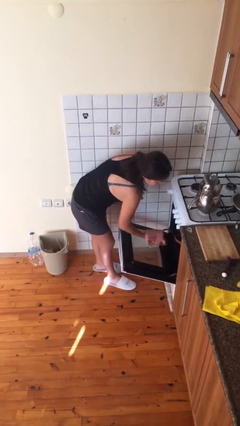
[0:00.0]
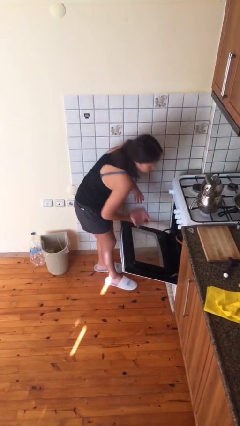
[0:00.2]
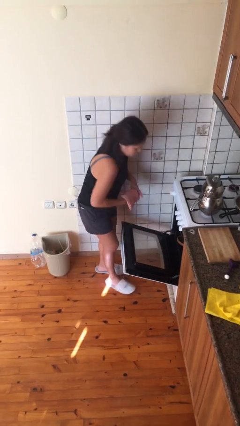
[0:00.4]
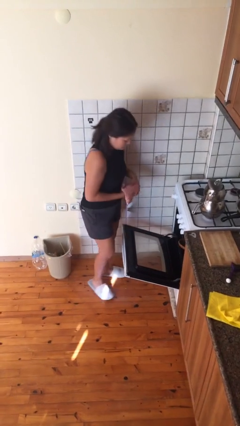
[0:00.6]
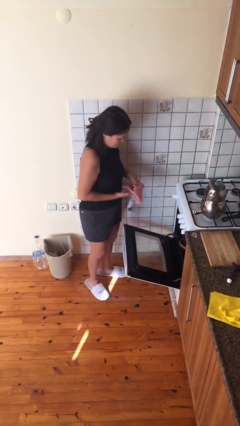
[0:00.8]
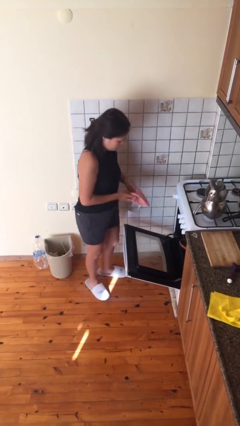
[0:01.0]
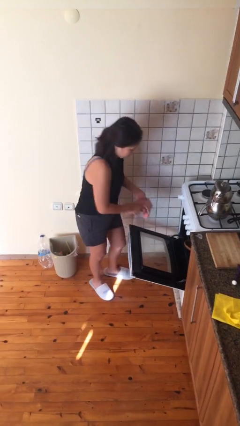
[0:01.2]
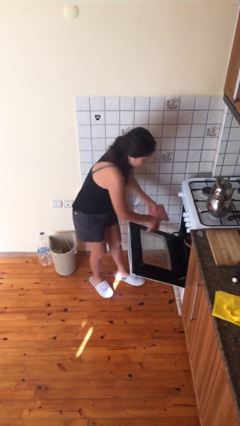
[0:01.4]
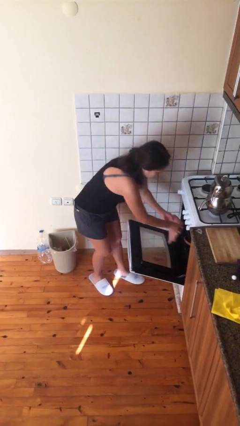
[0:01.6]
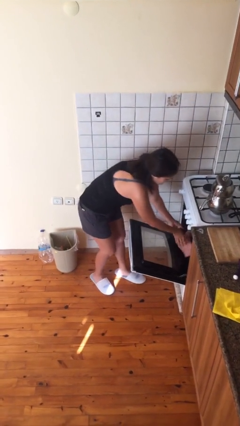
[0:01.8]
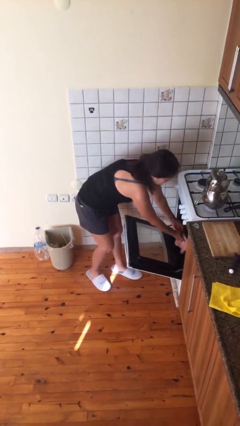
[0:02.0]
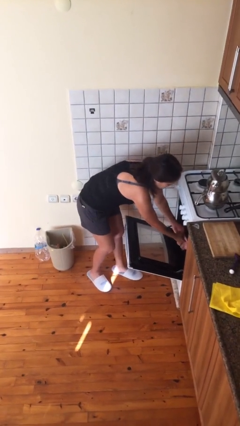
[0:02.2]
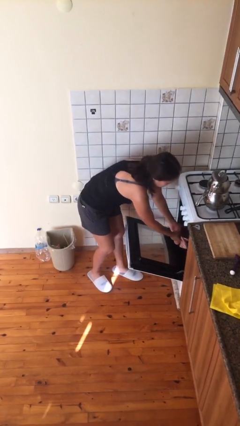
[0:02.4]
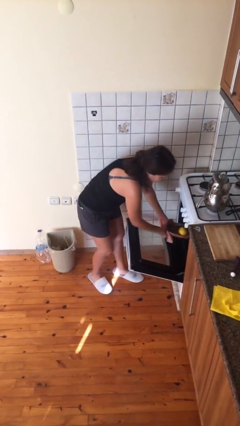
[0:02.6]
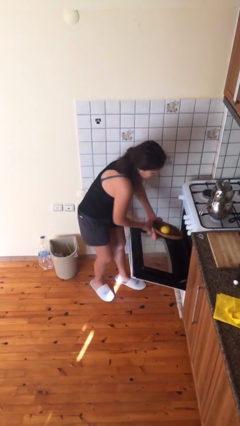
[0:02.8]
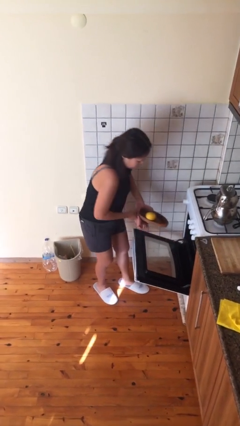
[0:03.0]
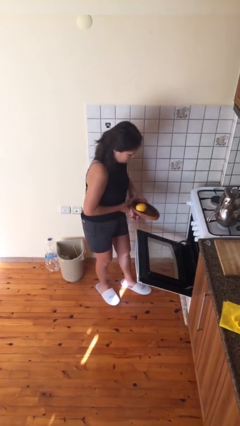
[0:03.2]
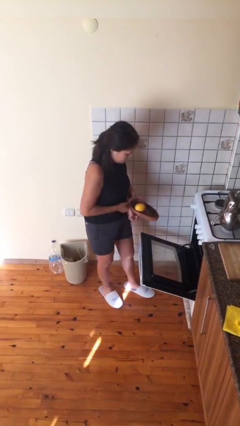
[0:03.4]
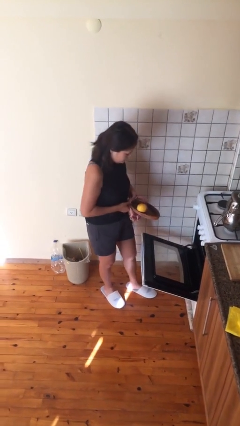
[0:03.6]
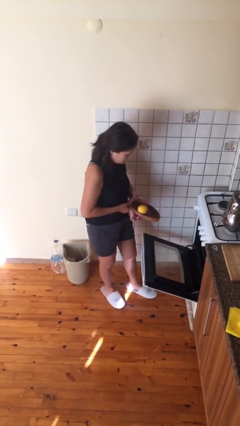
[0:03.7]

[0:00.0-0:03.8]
person takes object from oven

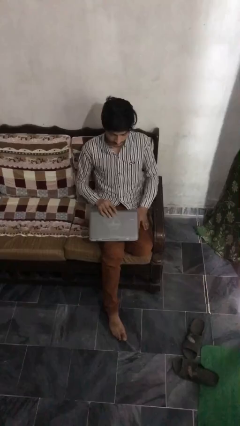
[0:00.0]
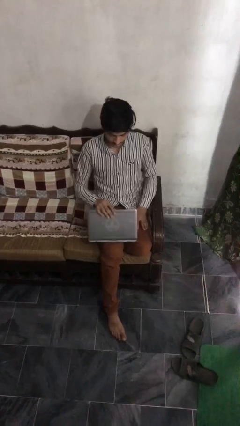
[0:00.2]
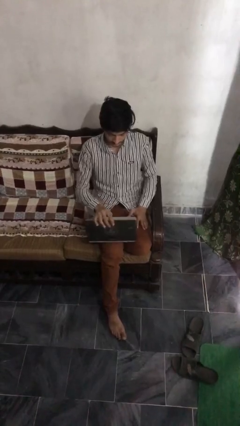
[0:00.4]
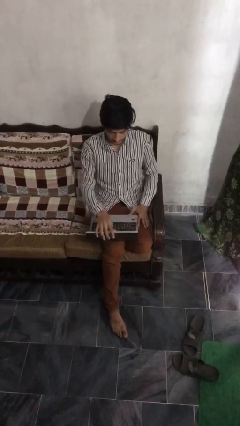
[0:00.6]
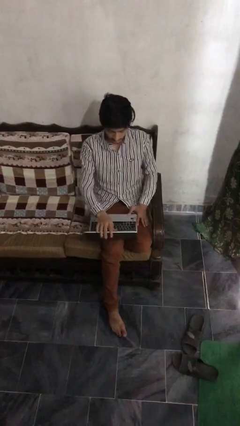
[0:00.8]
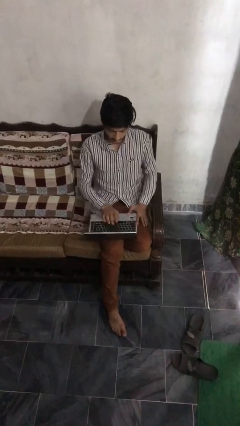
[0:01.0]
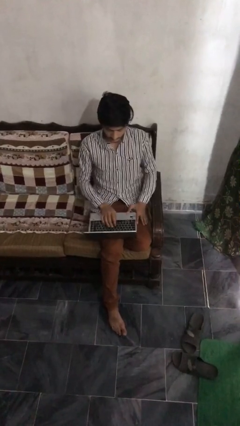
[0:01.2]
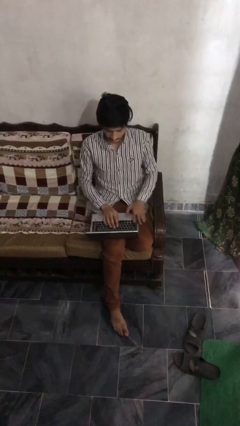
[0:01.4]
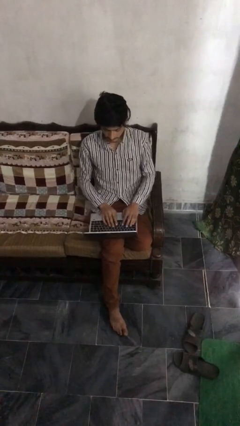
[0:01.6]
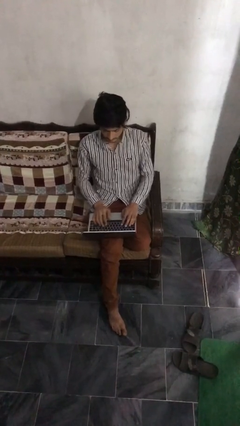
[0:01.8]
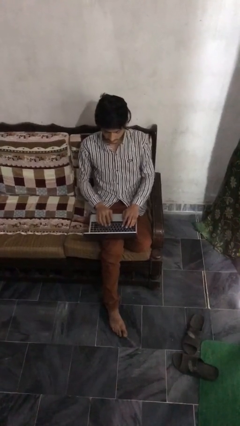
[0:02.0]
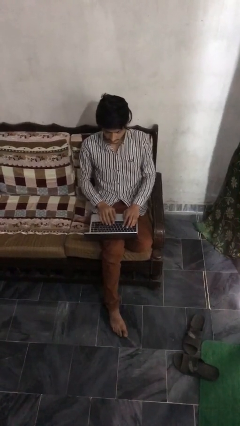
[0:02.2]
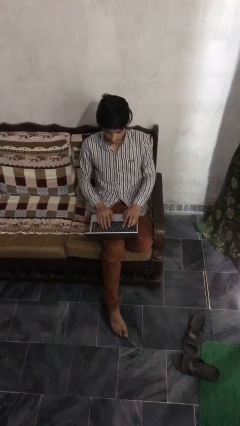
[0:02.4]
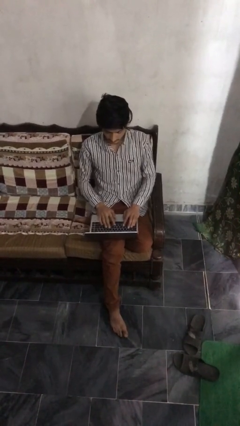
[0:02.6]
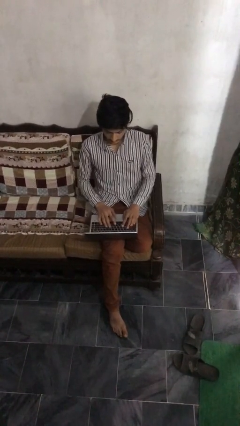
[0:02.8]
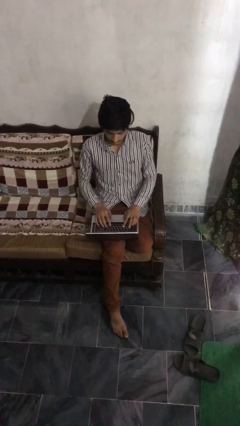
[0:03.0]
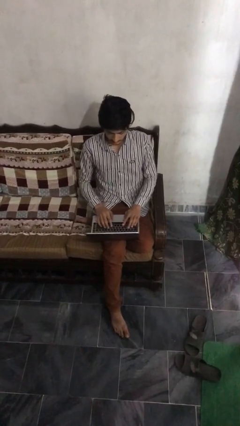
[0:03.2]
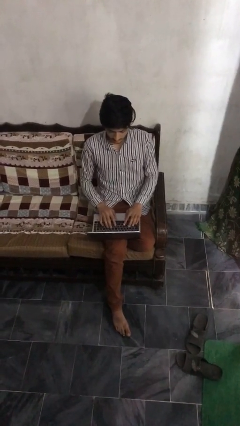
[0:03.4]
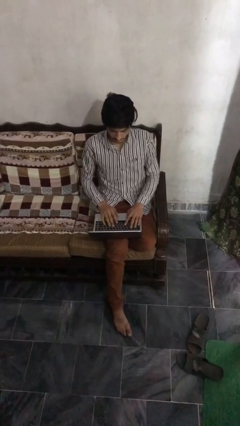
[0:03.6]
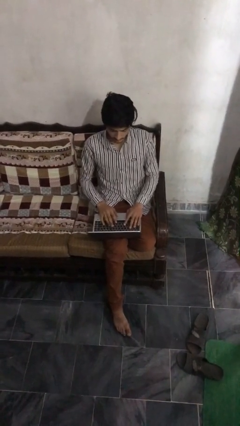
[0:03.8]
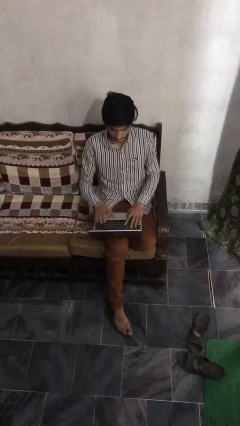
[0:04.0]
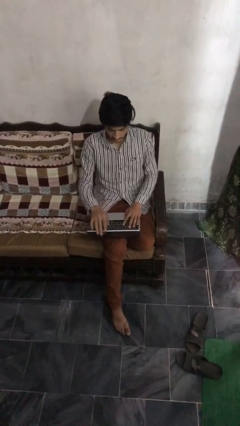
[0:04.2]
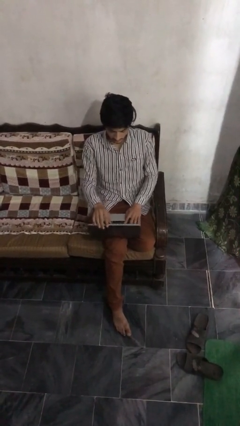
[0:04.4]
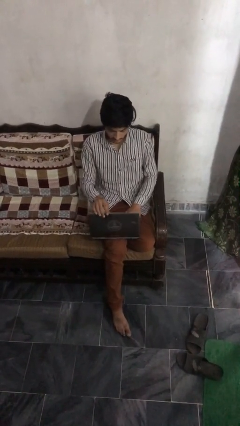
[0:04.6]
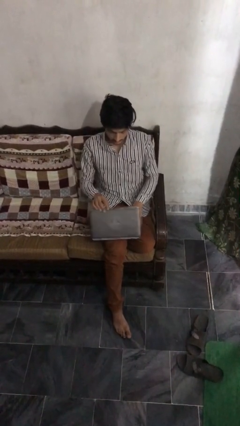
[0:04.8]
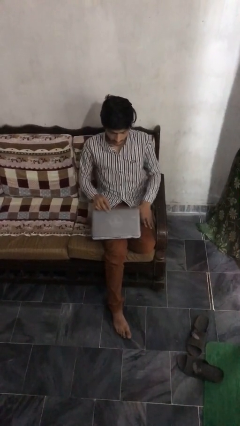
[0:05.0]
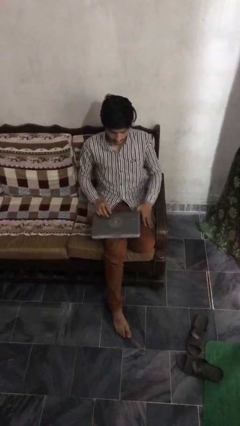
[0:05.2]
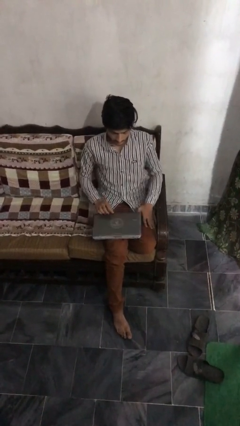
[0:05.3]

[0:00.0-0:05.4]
person interacts with laptop

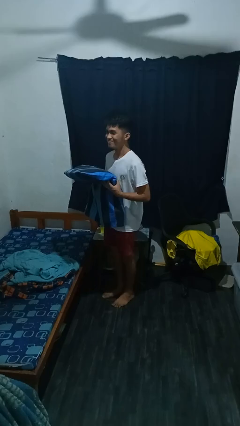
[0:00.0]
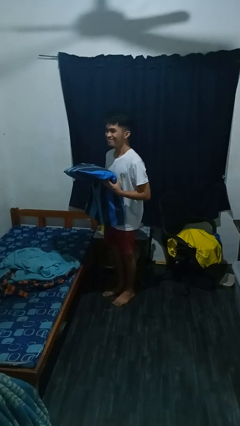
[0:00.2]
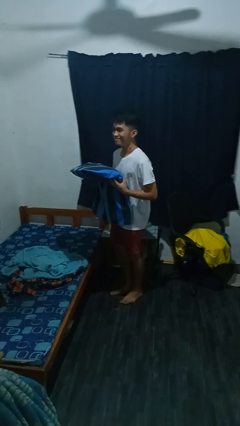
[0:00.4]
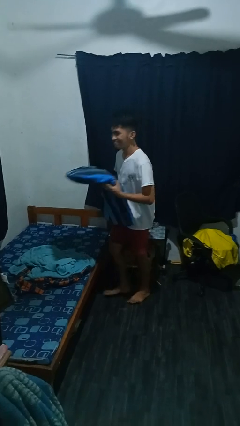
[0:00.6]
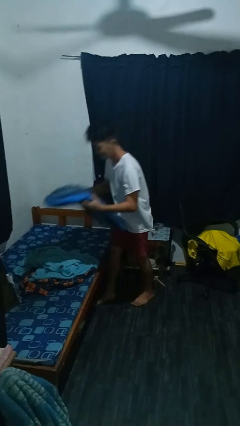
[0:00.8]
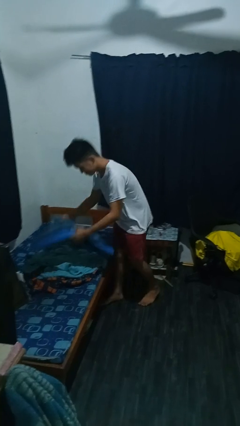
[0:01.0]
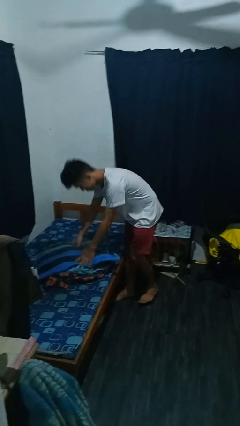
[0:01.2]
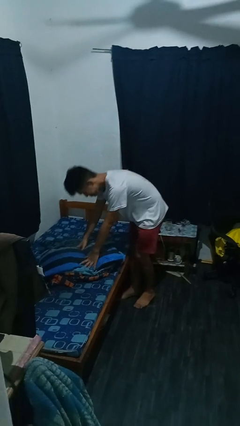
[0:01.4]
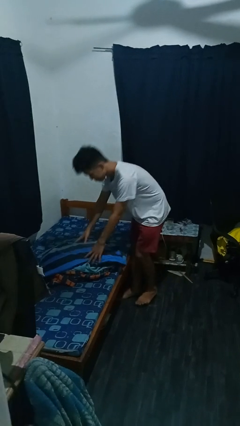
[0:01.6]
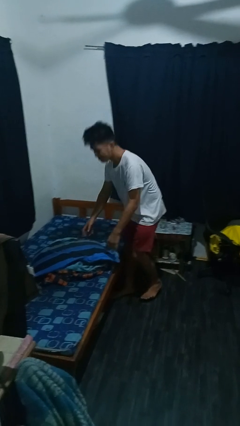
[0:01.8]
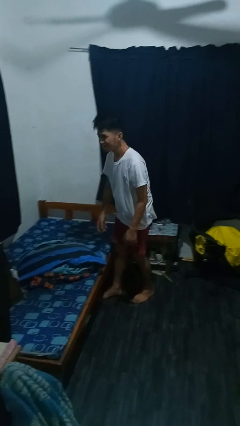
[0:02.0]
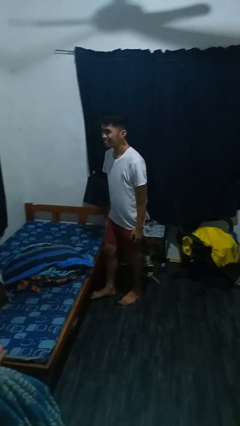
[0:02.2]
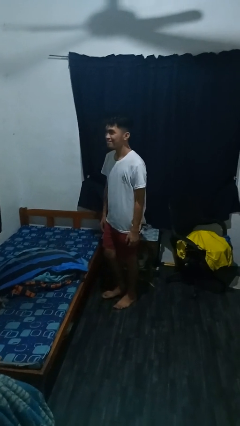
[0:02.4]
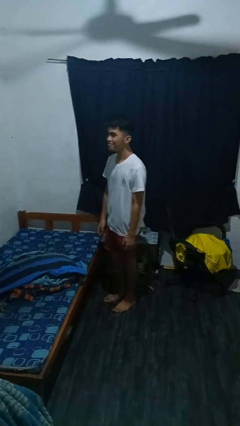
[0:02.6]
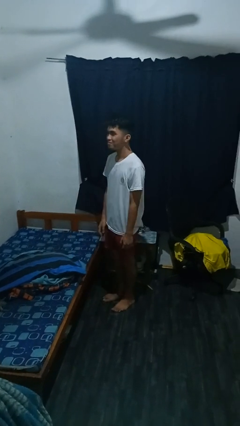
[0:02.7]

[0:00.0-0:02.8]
person puts down object on bed

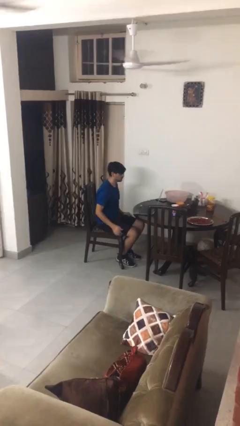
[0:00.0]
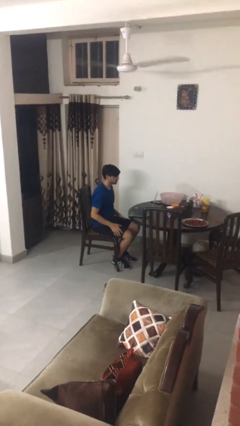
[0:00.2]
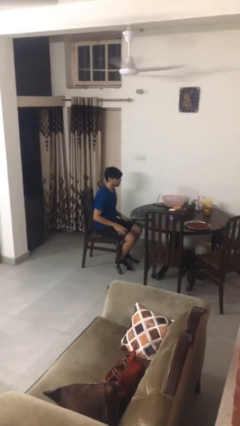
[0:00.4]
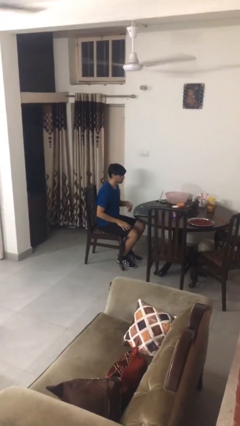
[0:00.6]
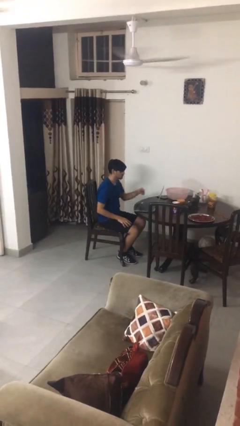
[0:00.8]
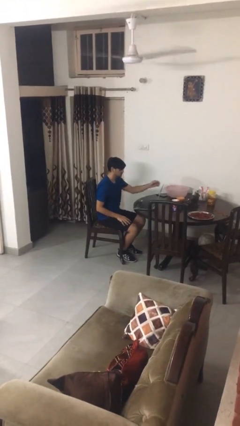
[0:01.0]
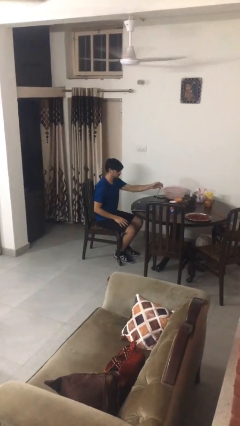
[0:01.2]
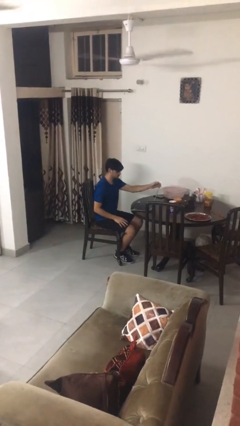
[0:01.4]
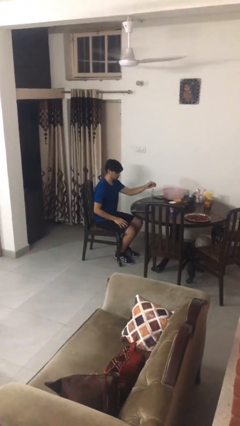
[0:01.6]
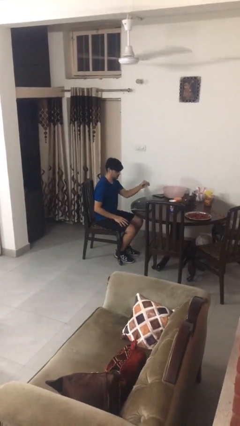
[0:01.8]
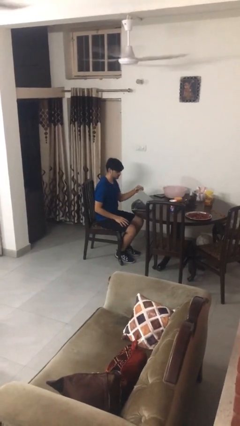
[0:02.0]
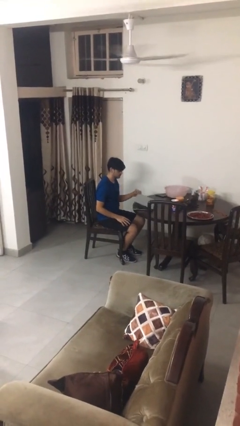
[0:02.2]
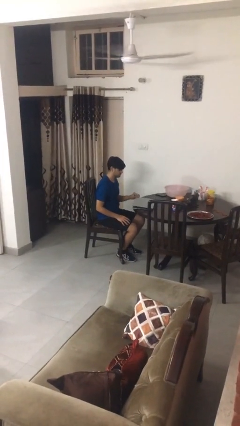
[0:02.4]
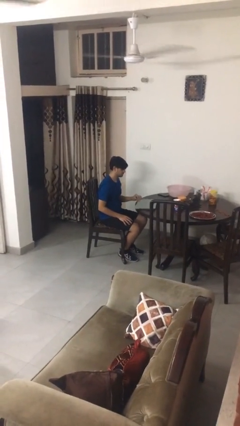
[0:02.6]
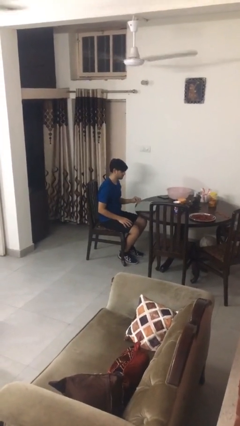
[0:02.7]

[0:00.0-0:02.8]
person closes laptop

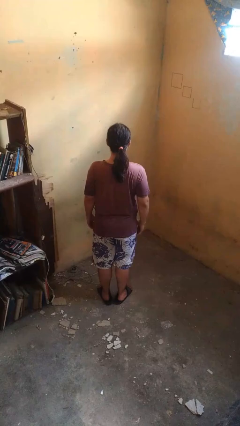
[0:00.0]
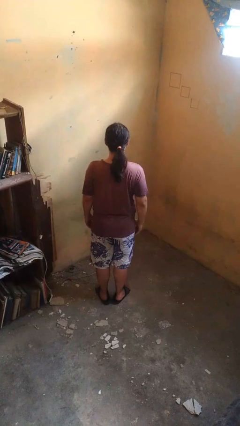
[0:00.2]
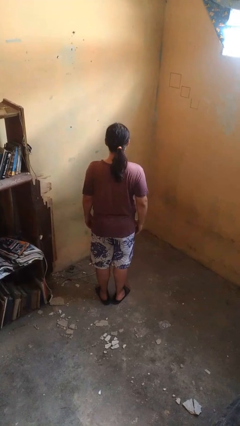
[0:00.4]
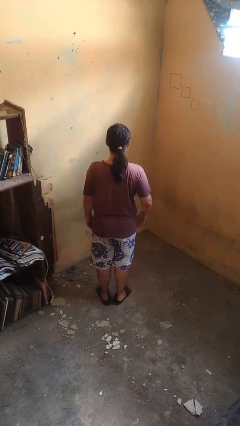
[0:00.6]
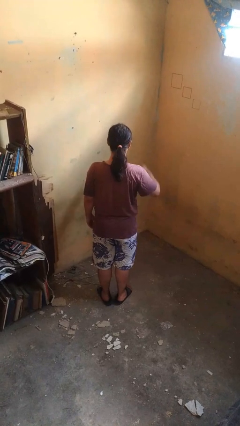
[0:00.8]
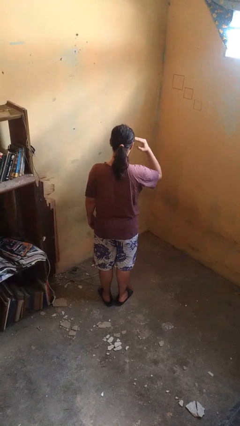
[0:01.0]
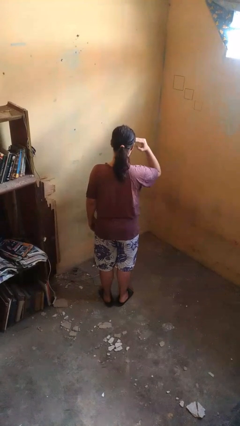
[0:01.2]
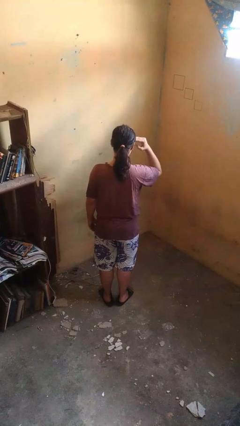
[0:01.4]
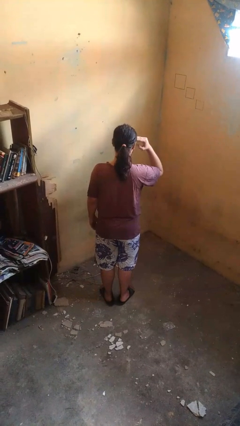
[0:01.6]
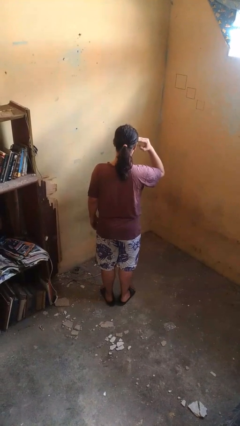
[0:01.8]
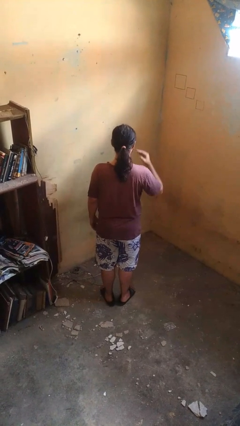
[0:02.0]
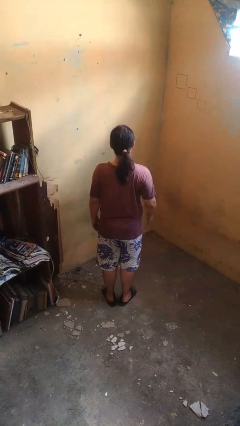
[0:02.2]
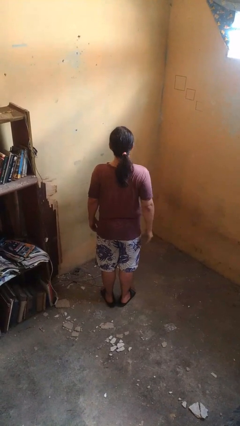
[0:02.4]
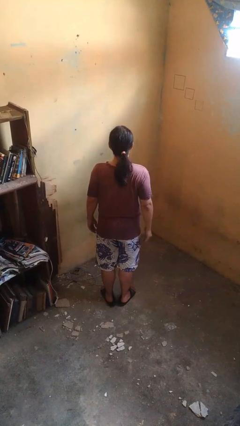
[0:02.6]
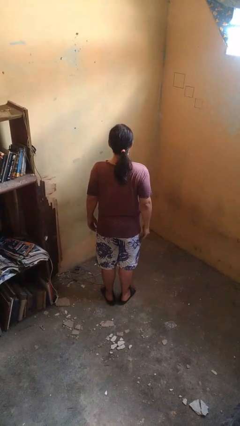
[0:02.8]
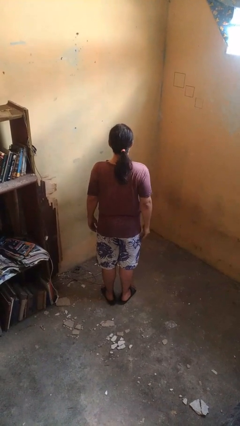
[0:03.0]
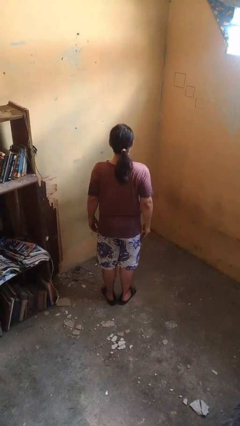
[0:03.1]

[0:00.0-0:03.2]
person salutes
